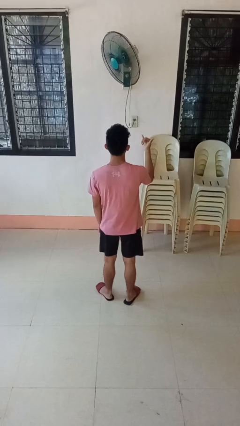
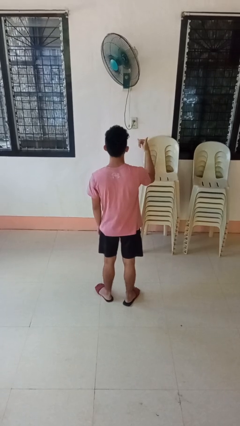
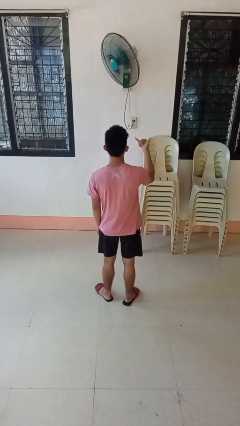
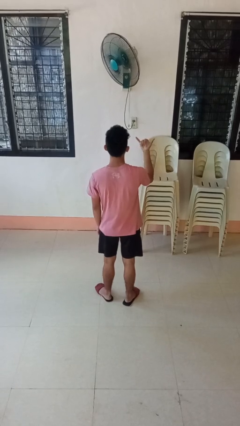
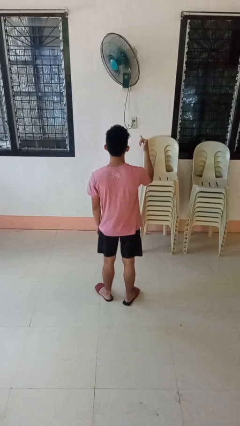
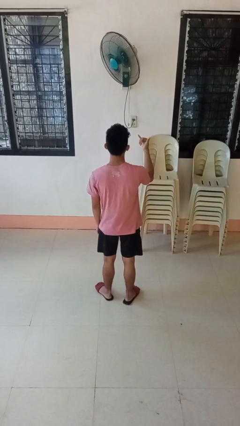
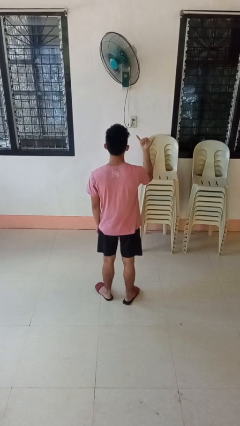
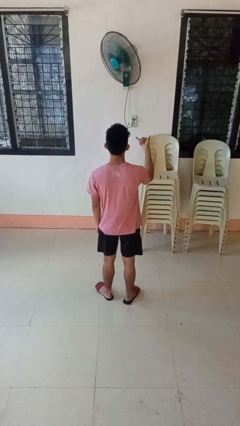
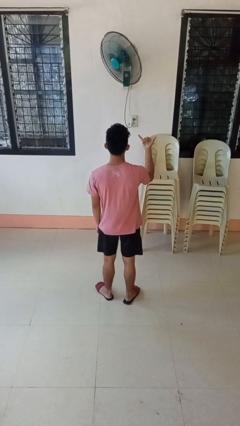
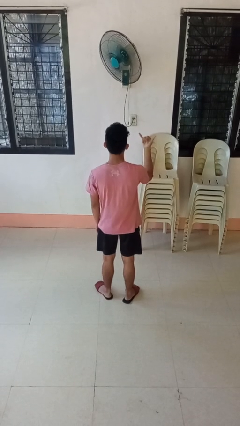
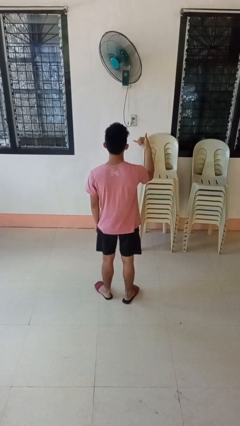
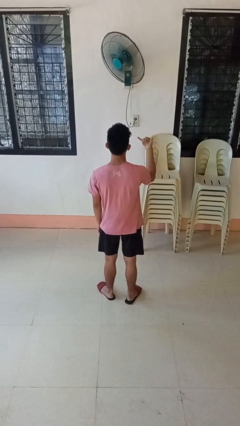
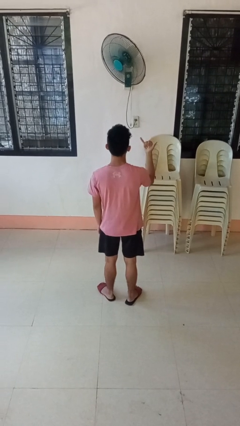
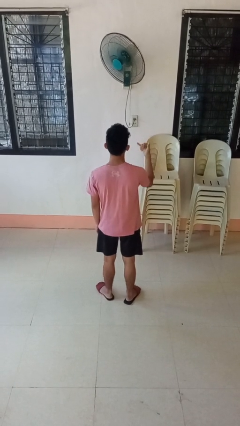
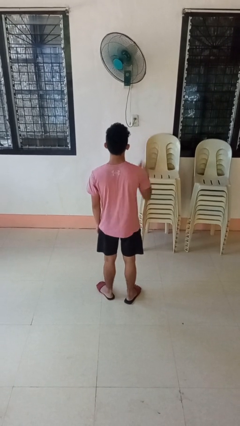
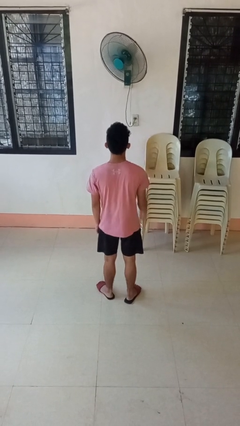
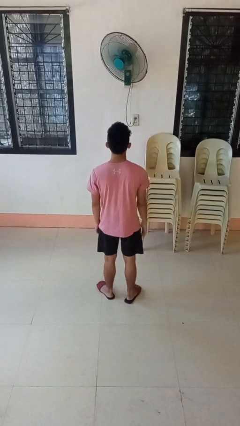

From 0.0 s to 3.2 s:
person gestures hang loose

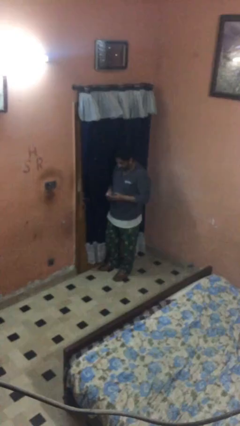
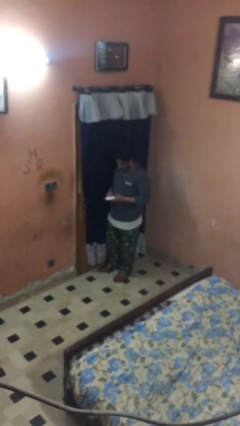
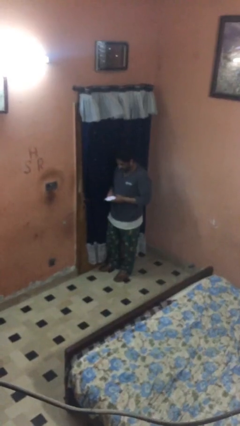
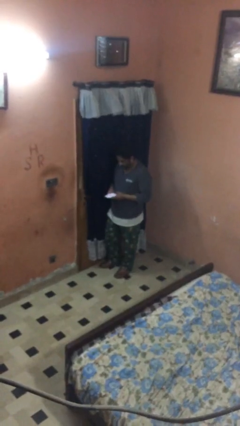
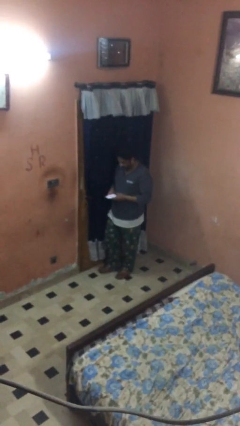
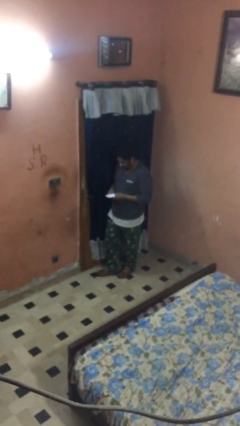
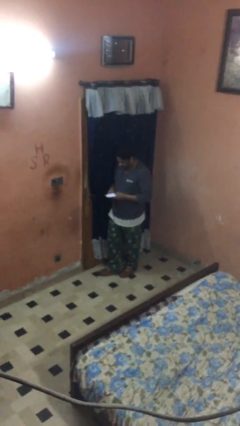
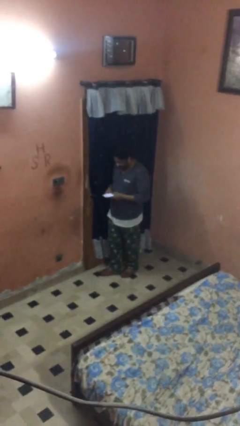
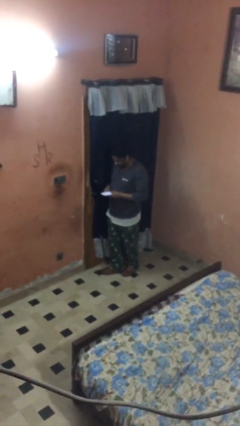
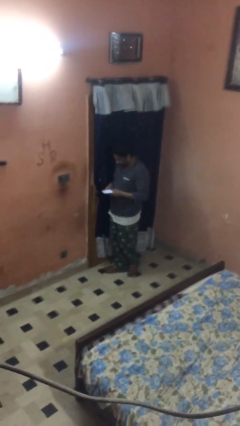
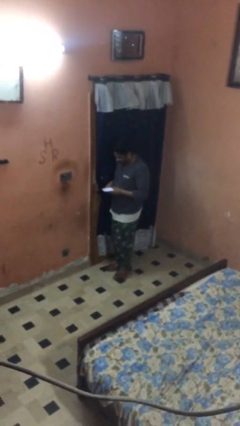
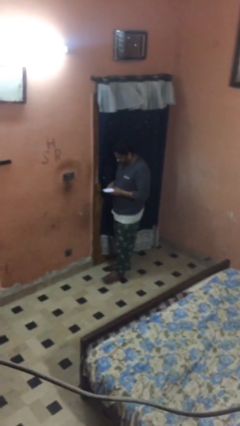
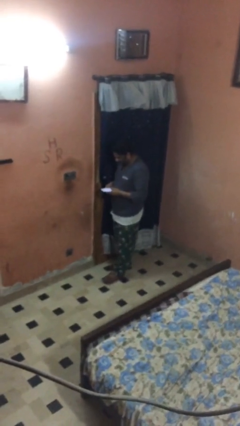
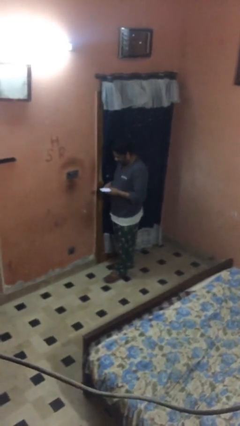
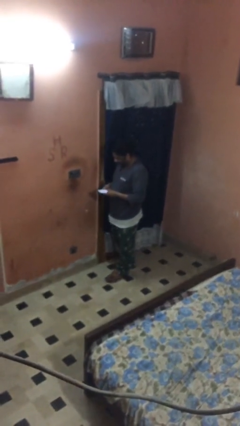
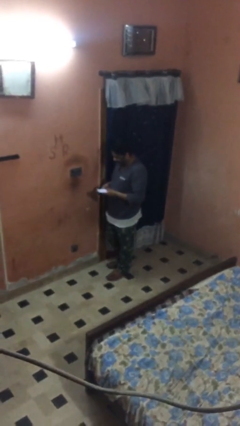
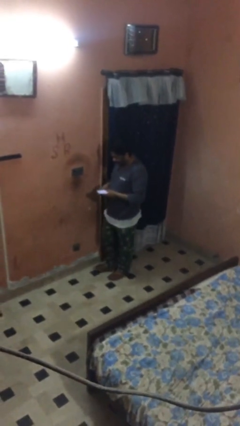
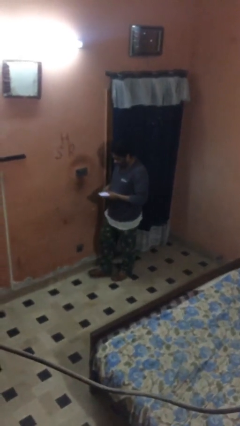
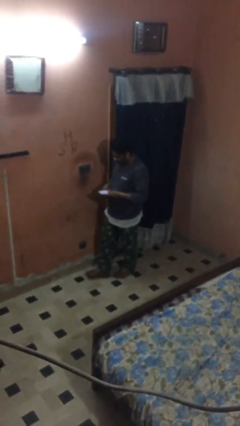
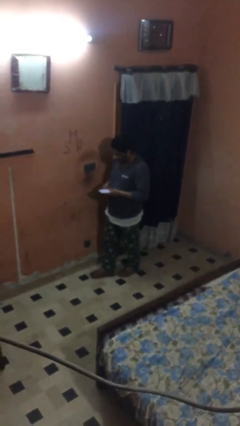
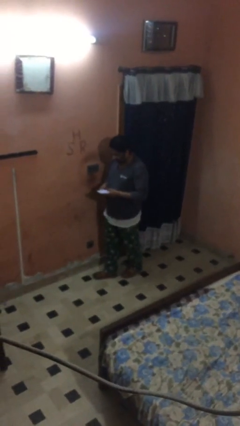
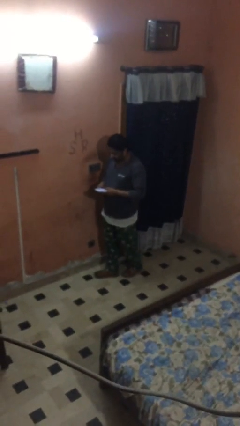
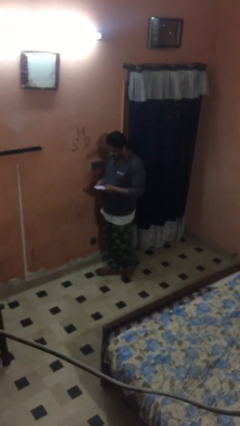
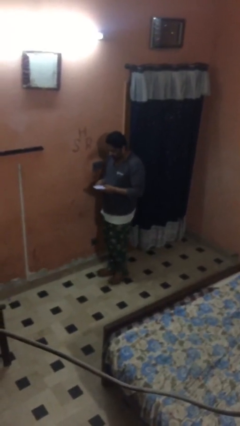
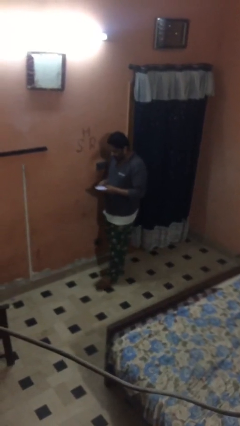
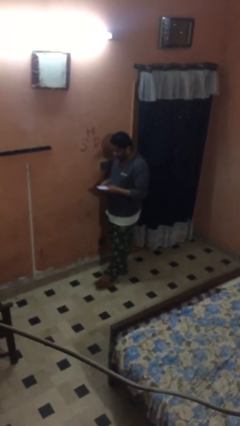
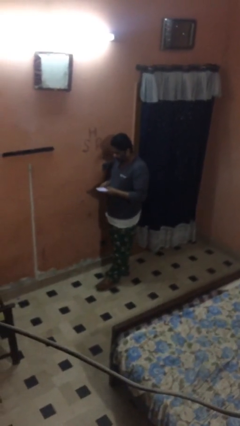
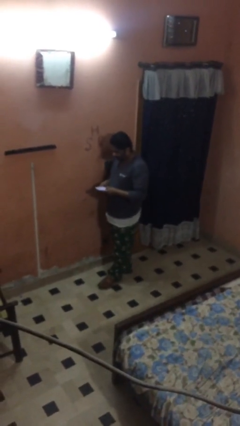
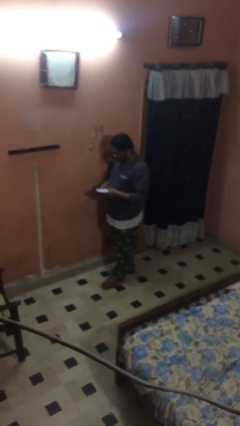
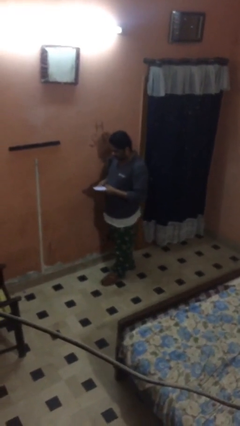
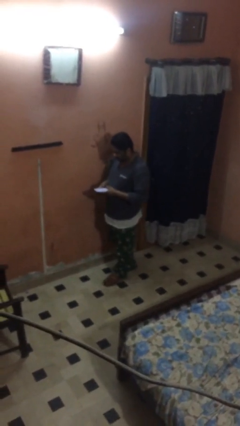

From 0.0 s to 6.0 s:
person texts on phone

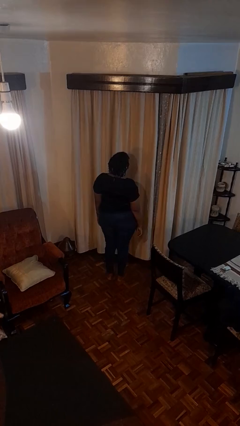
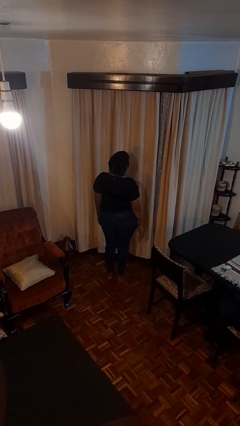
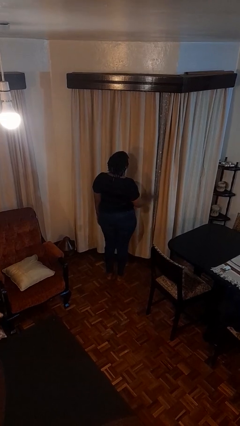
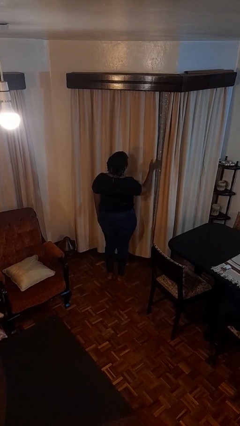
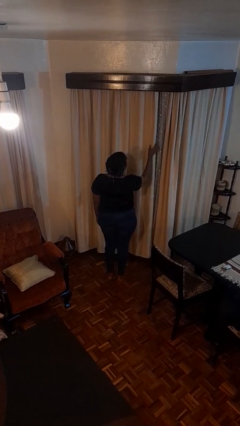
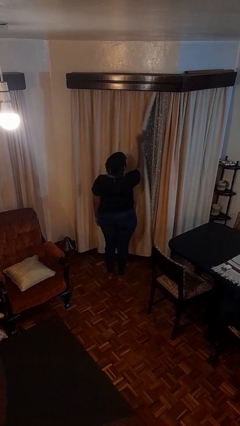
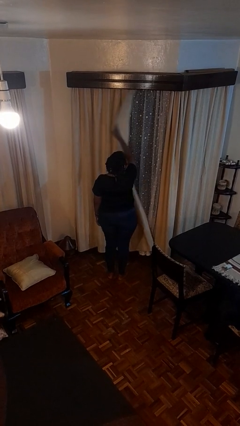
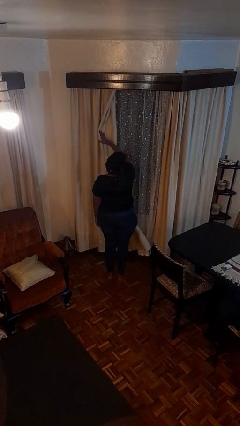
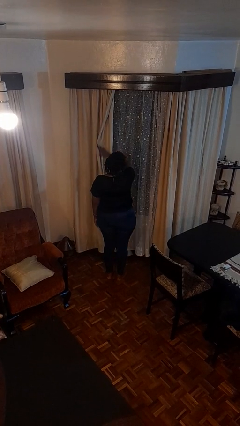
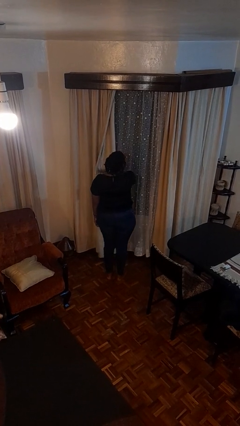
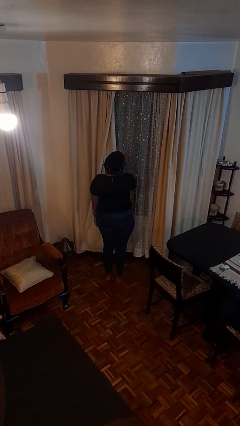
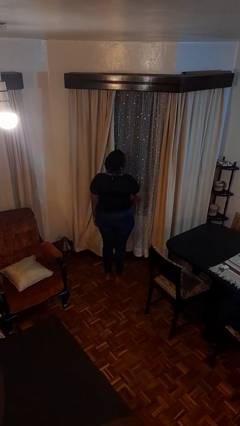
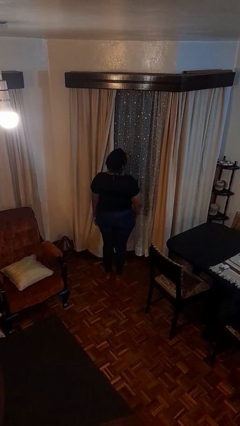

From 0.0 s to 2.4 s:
person opens curtains

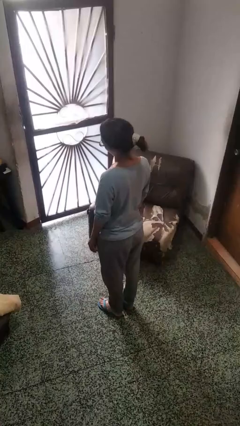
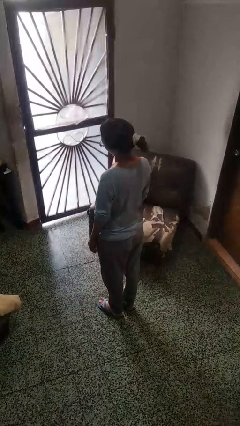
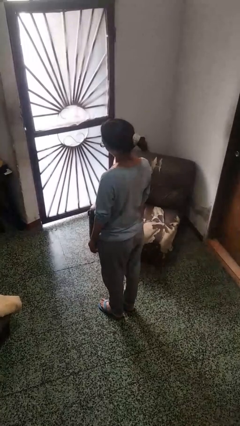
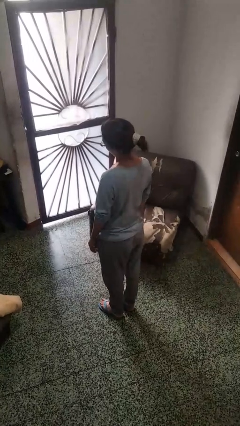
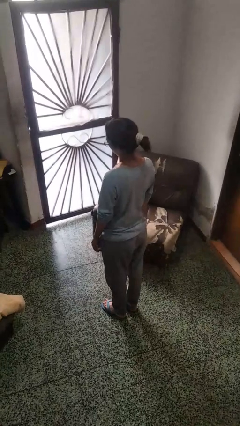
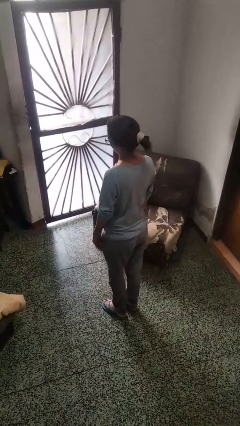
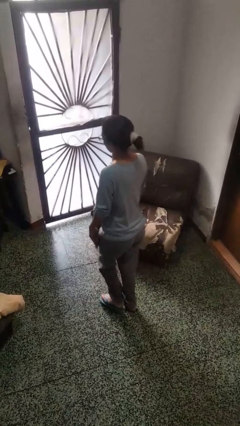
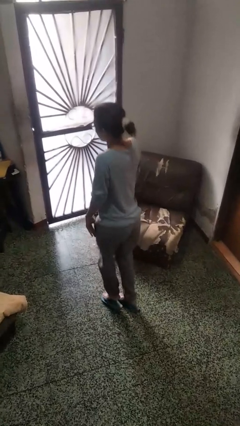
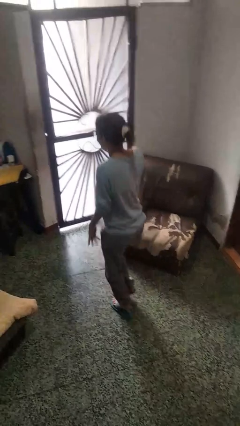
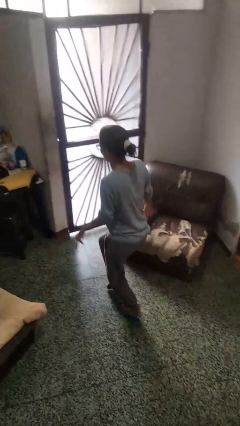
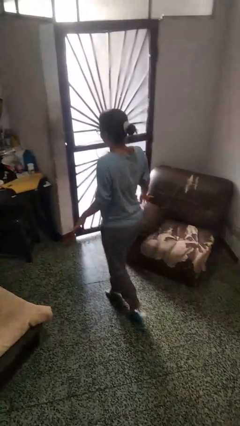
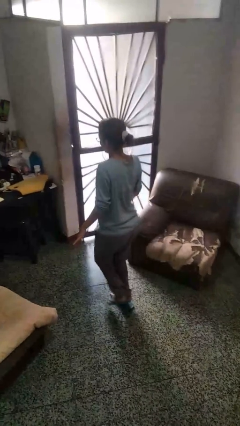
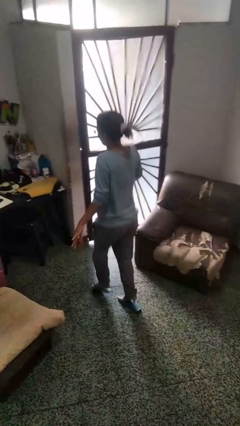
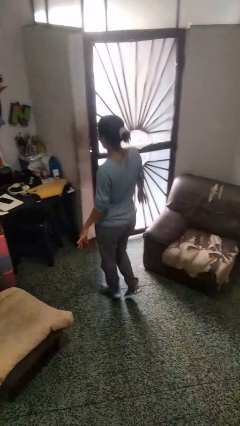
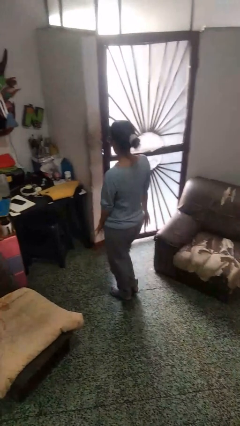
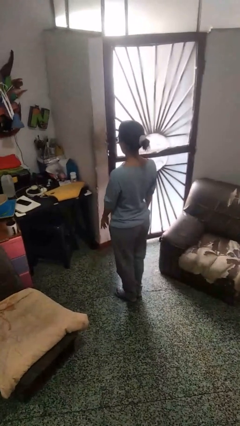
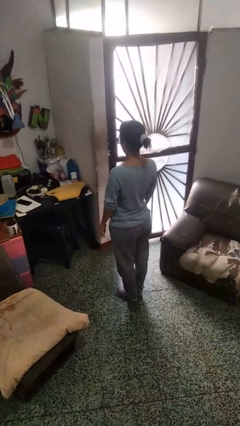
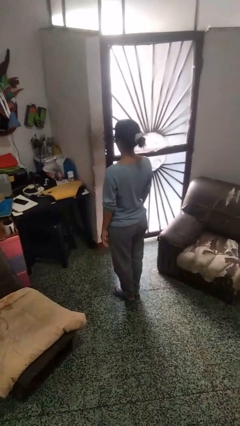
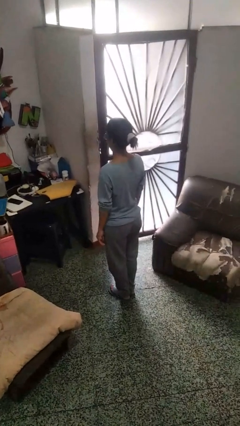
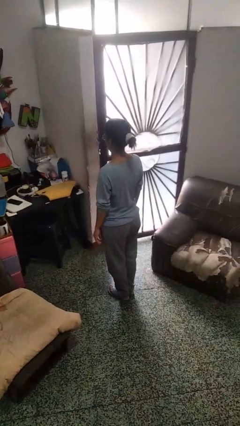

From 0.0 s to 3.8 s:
person walks tiptoe

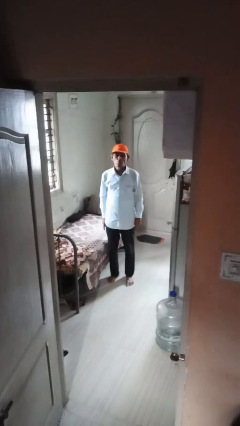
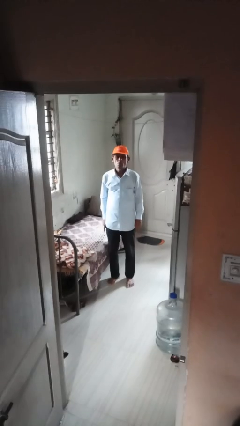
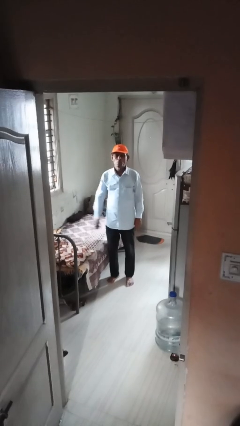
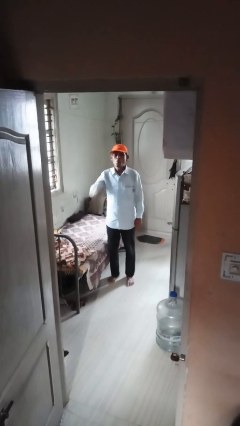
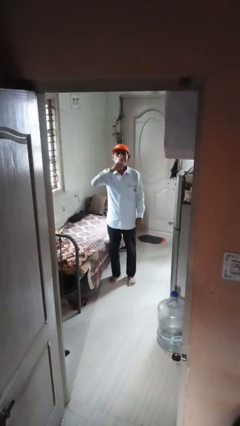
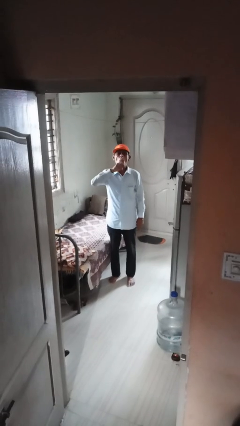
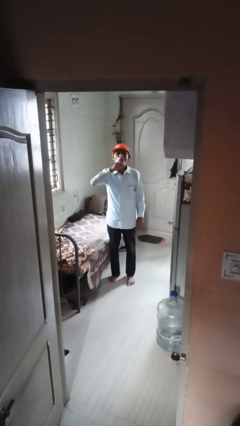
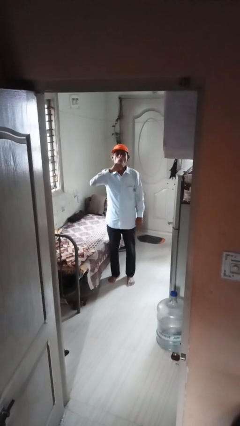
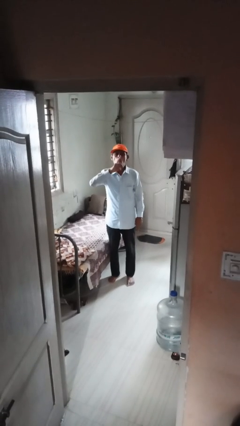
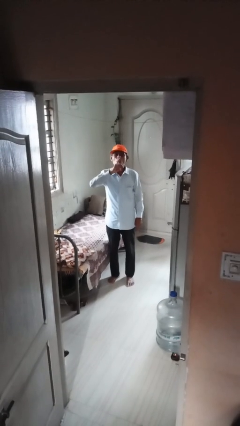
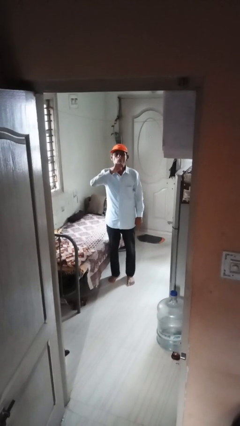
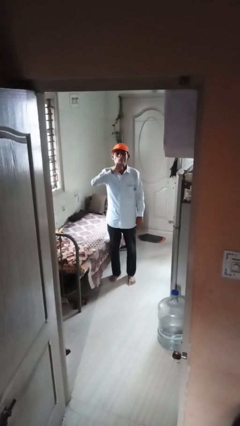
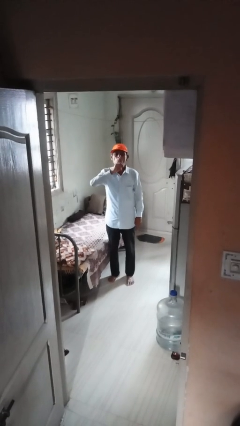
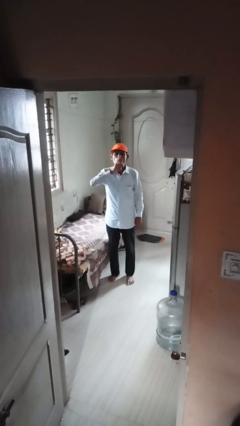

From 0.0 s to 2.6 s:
person gestures be quiet
